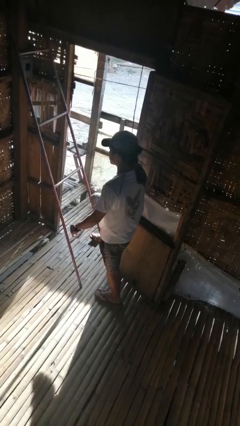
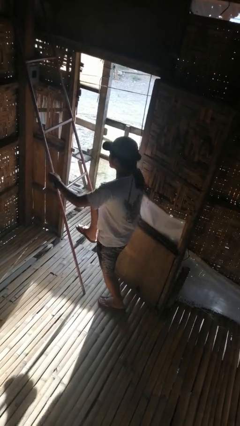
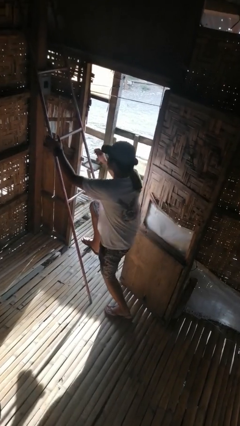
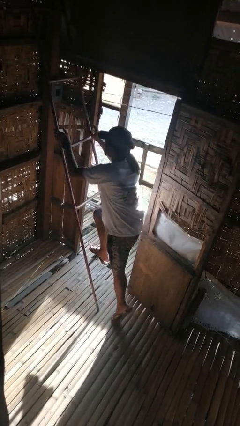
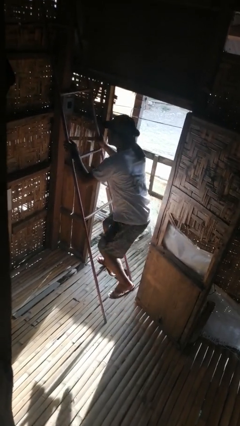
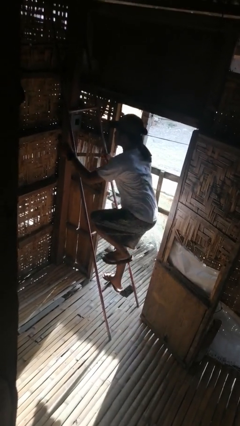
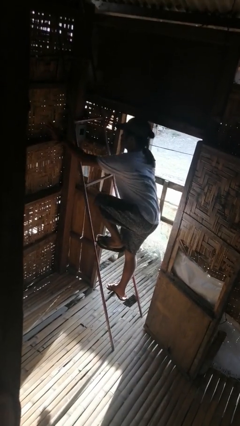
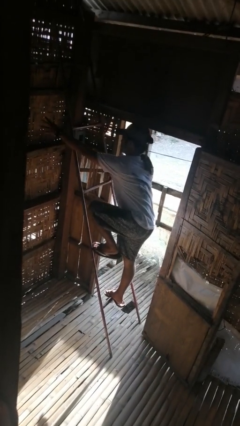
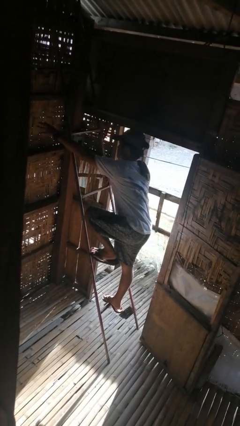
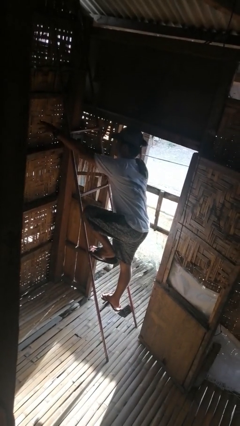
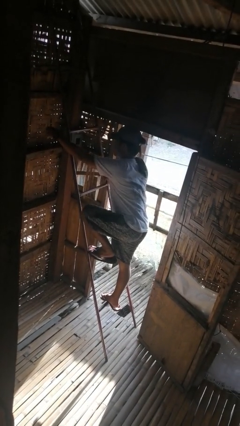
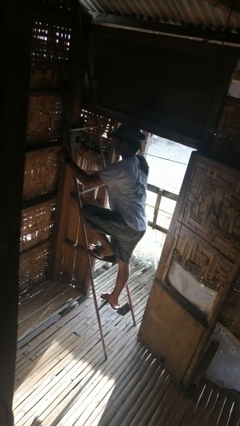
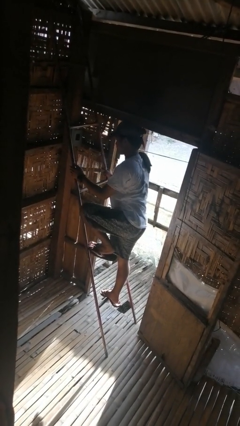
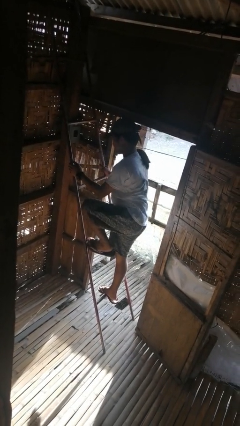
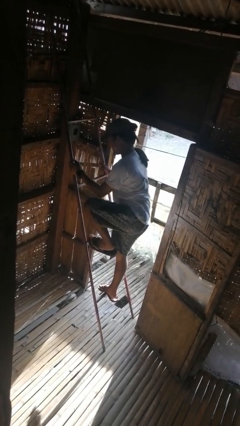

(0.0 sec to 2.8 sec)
person climbs up ladder

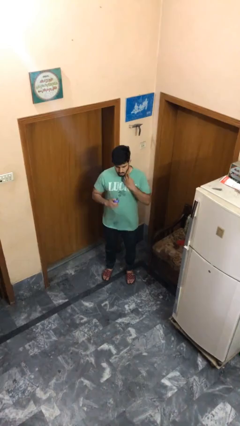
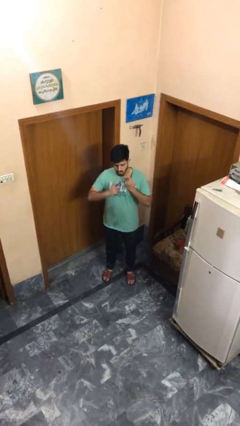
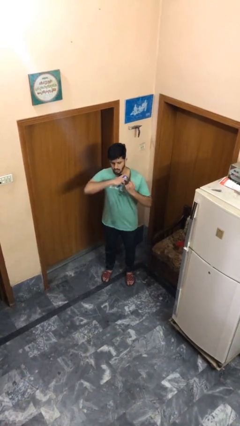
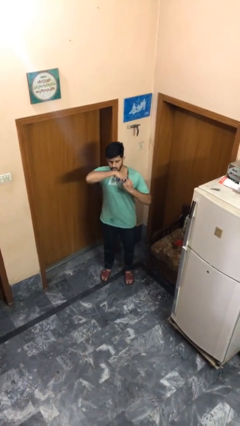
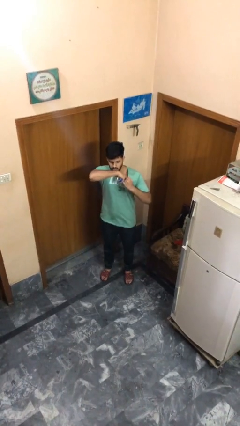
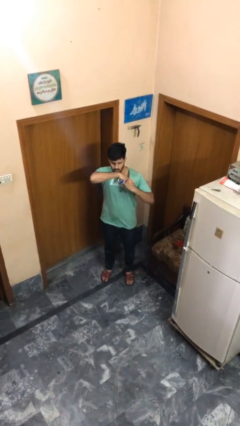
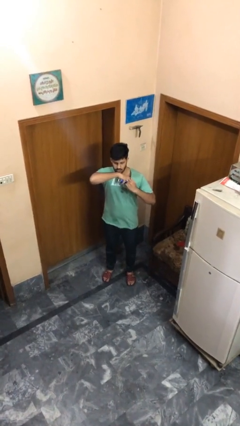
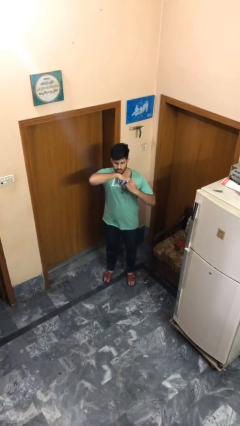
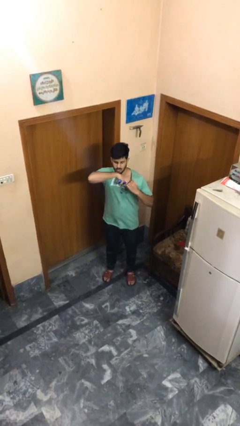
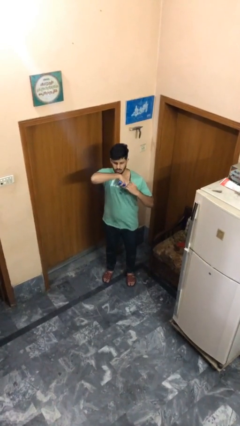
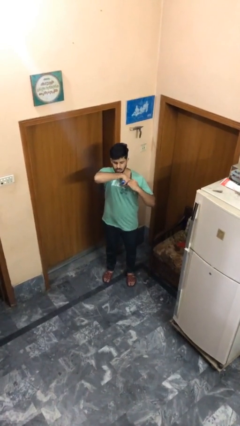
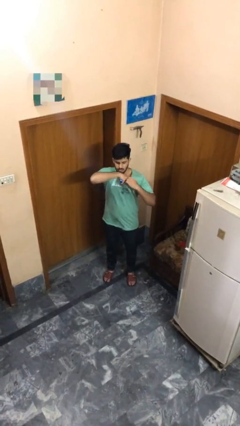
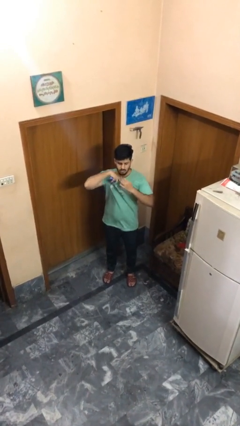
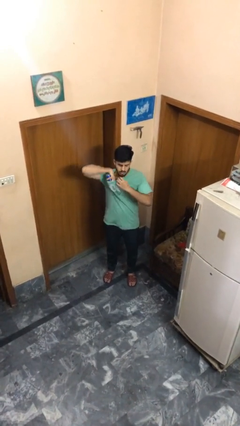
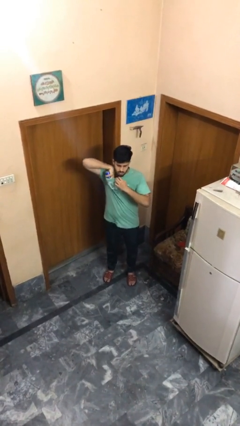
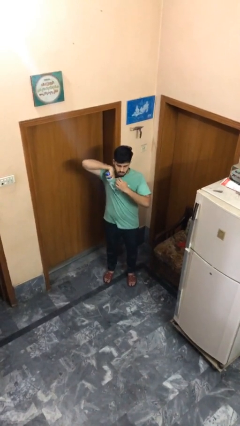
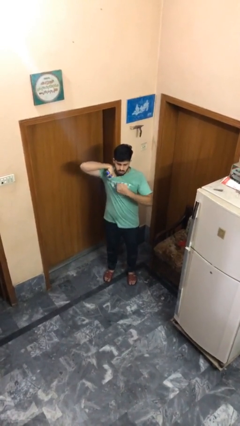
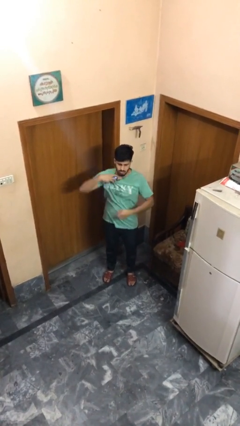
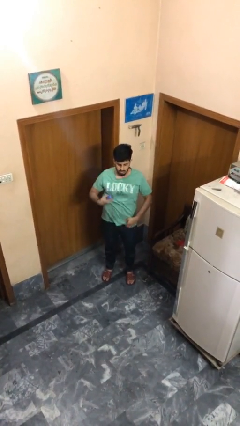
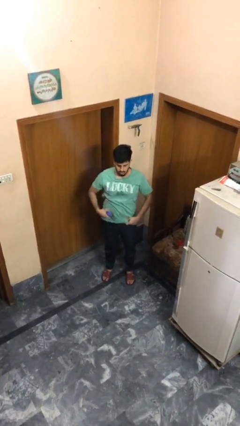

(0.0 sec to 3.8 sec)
person applies deodorant

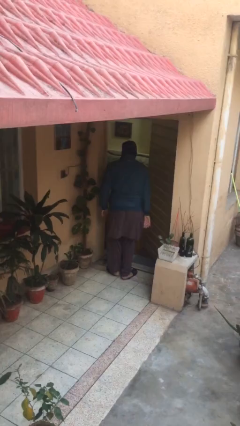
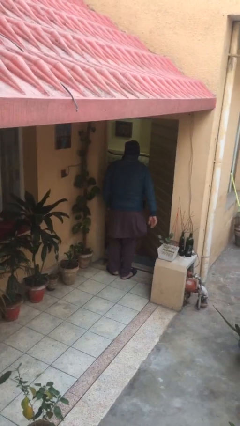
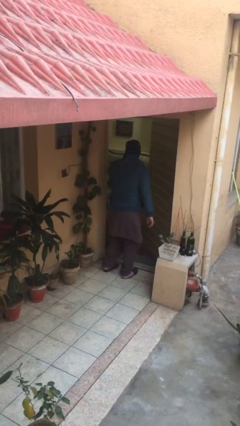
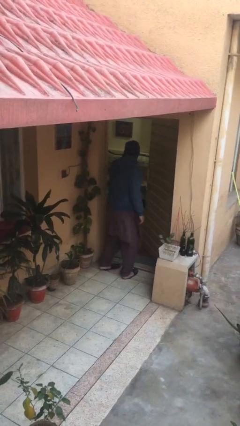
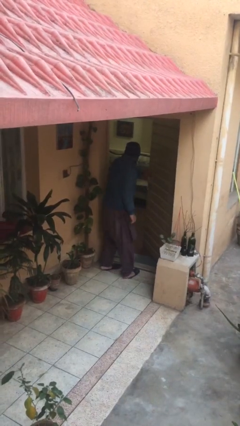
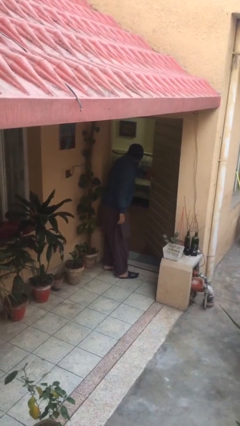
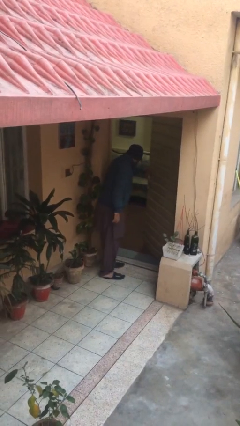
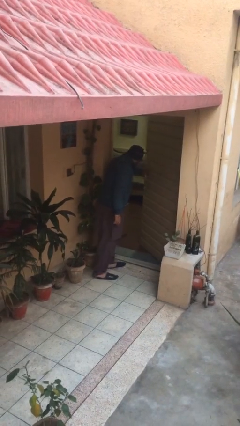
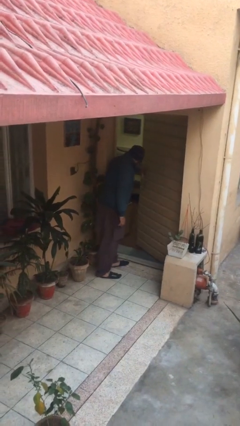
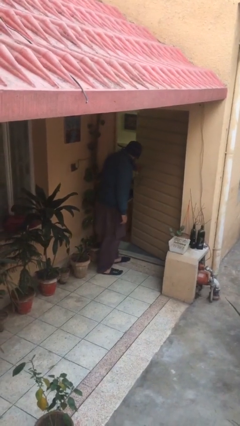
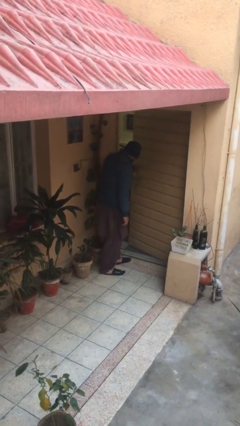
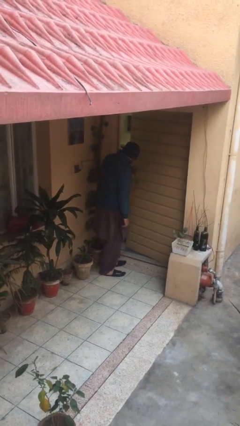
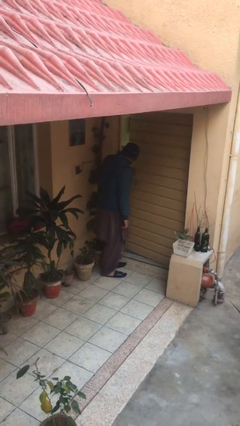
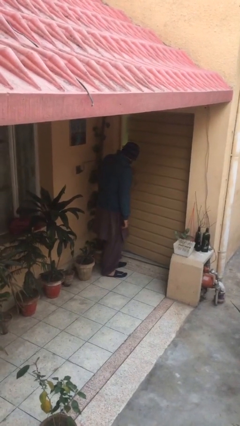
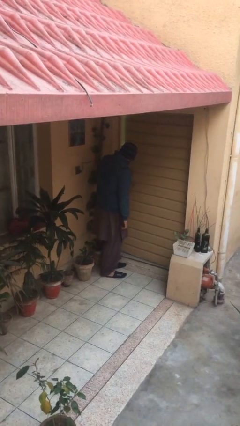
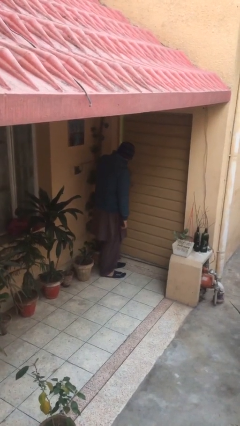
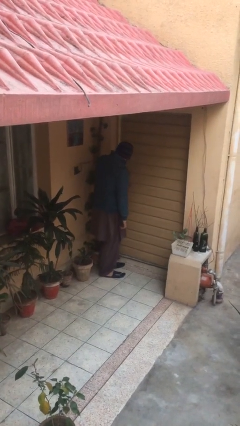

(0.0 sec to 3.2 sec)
person closes facility door

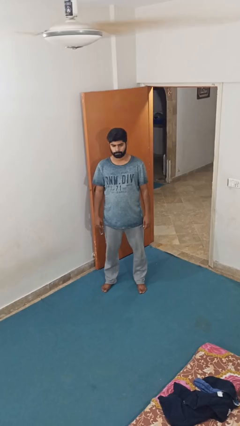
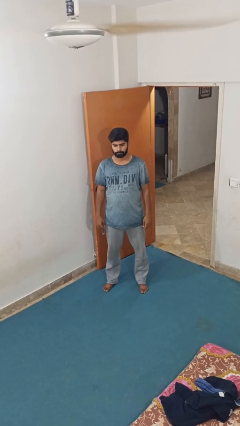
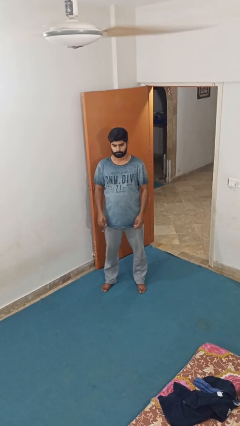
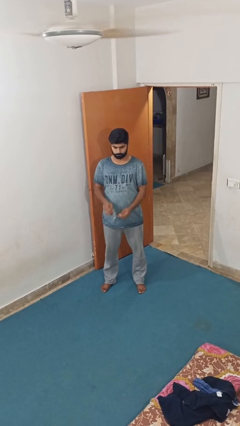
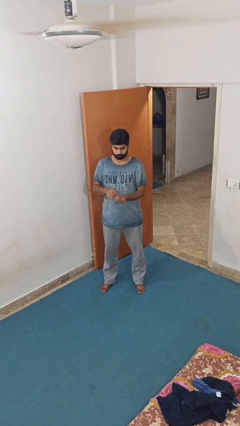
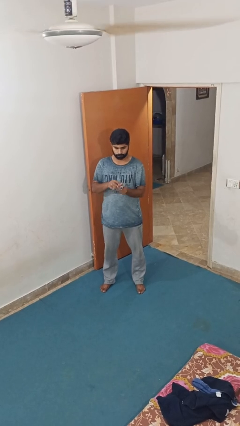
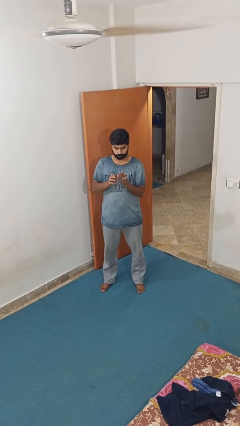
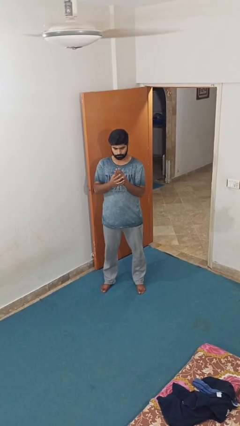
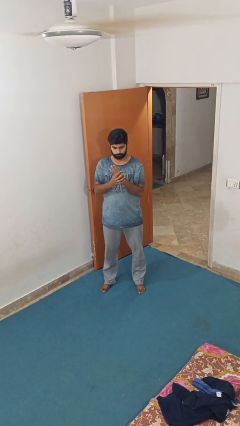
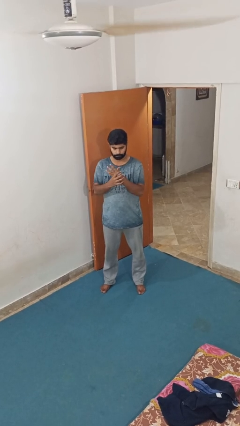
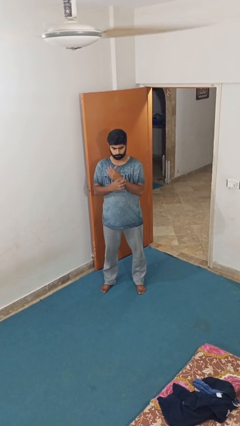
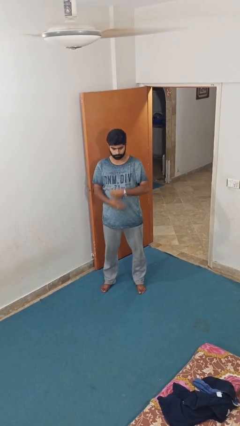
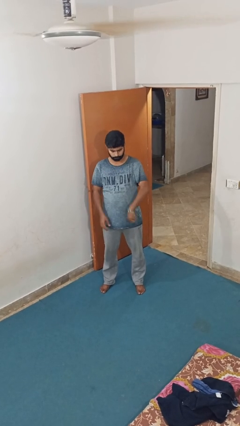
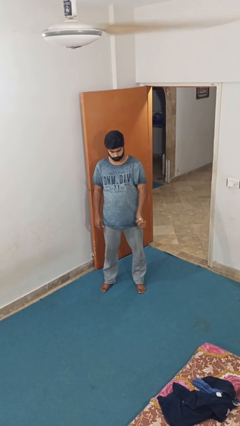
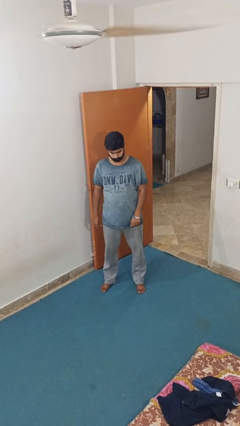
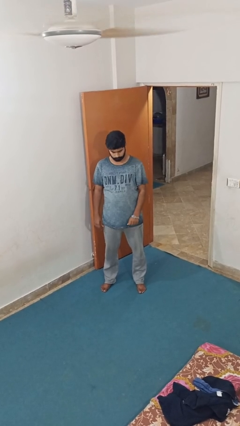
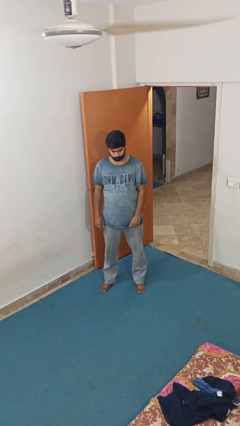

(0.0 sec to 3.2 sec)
person puts on wristwatch

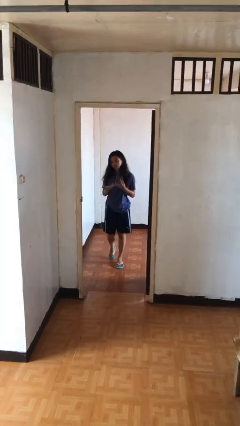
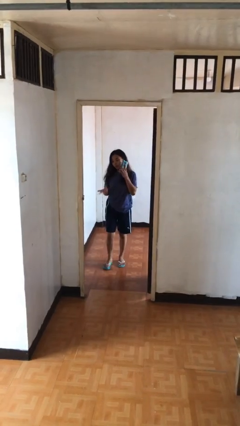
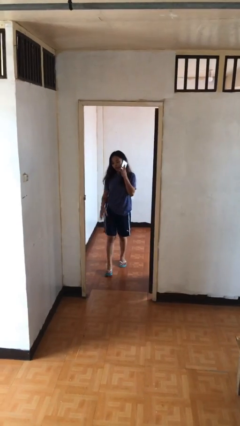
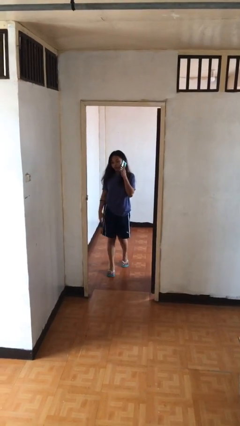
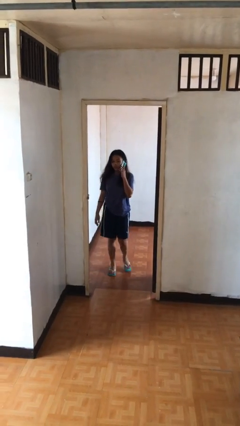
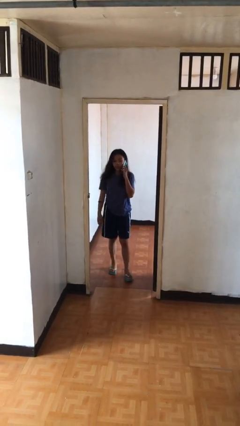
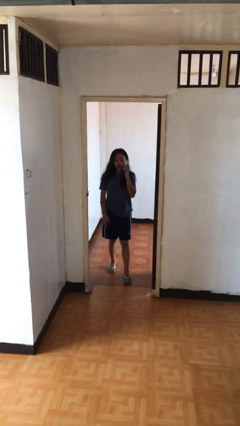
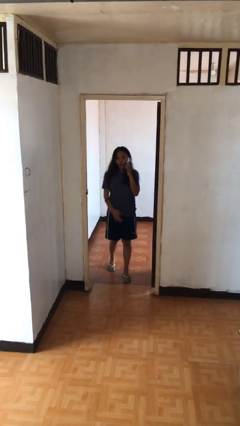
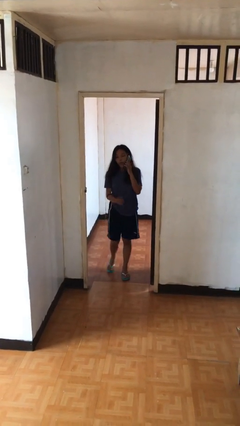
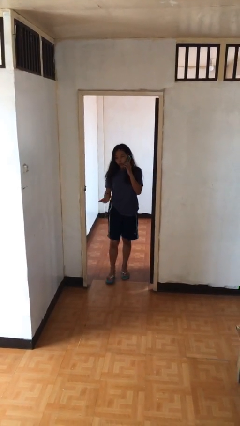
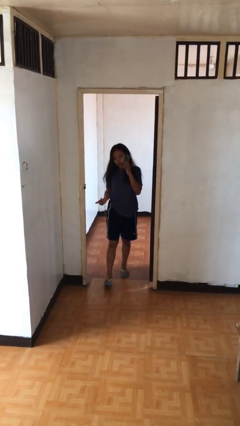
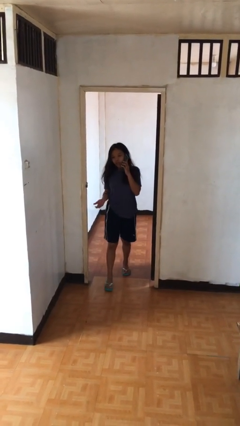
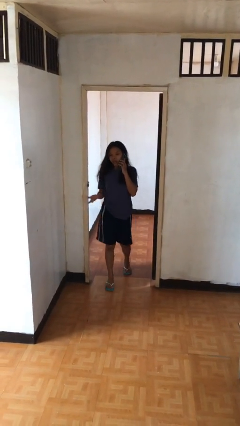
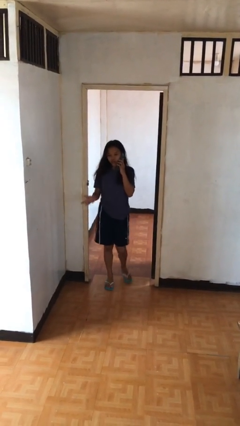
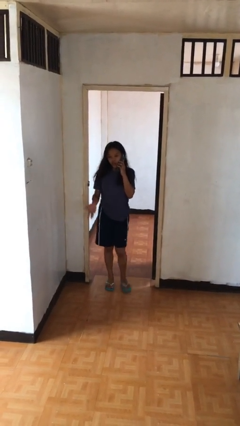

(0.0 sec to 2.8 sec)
person talks on phone

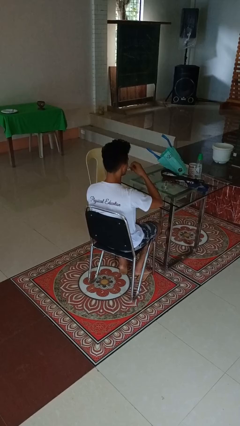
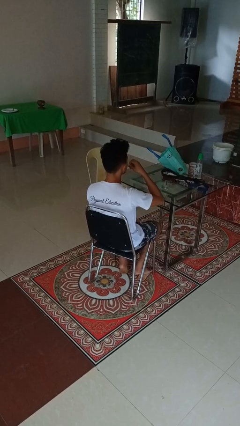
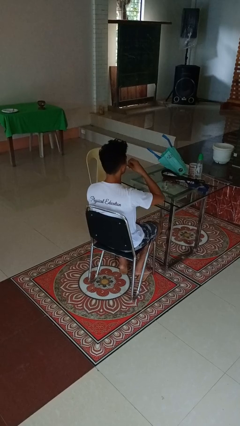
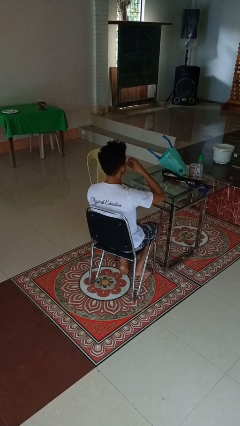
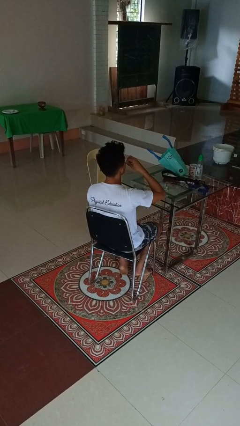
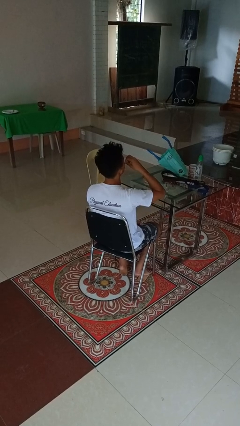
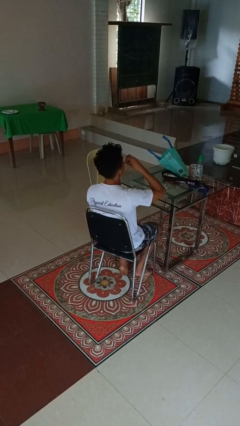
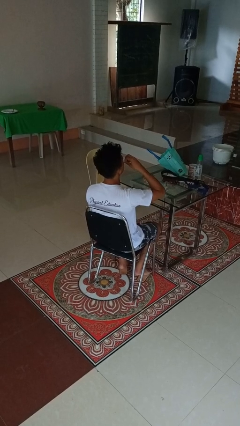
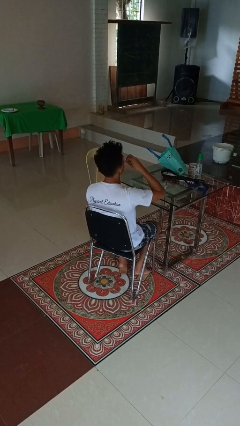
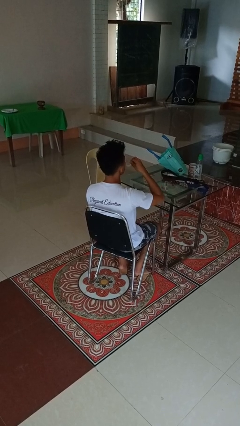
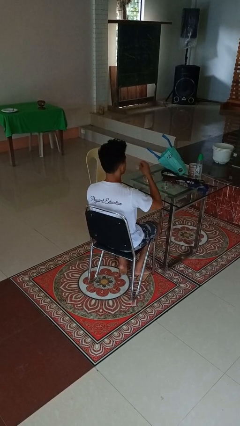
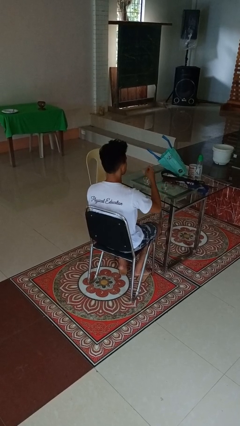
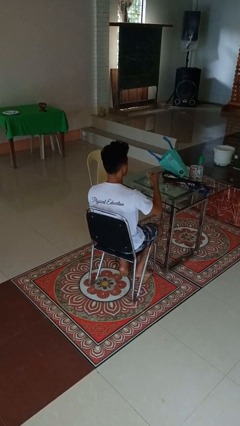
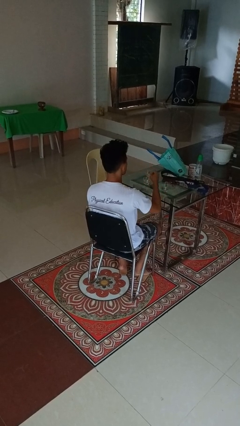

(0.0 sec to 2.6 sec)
person drinks from shotglass
